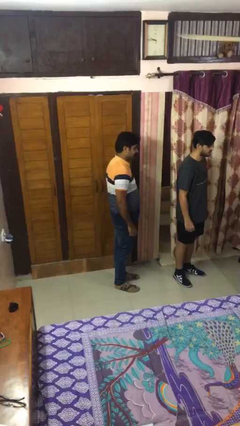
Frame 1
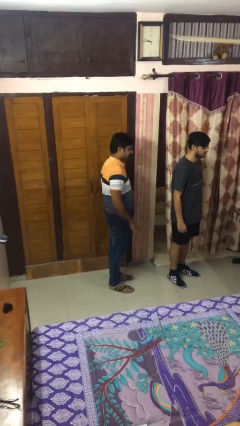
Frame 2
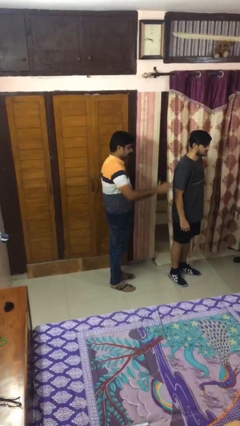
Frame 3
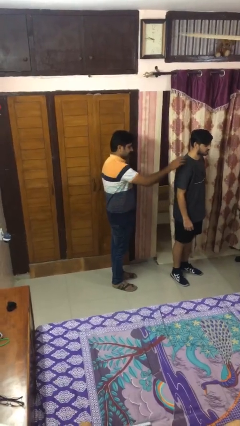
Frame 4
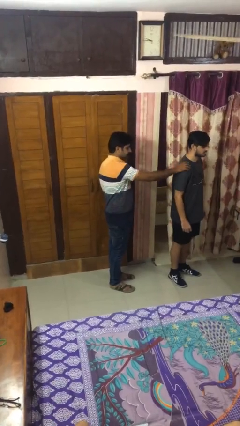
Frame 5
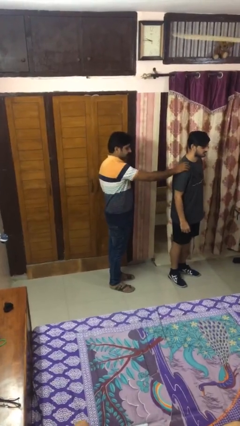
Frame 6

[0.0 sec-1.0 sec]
person grabs person by shoulder

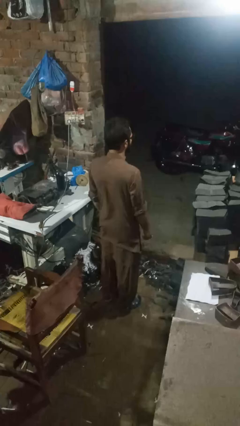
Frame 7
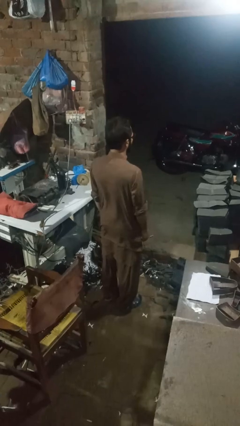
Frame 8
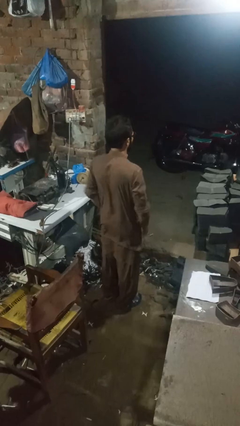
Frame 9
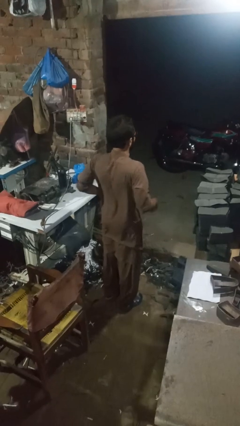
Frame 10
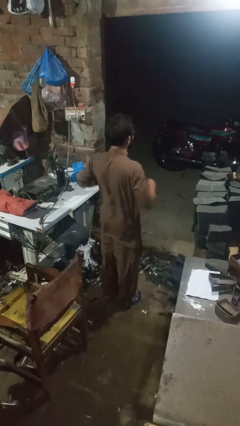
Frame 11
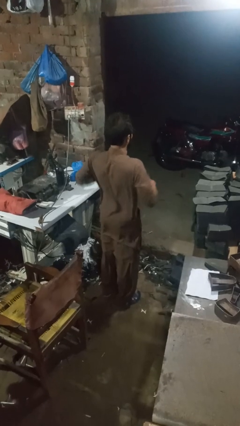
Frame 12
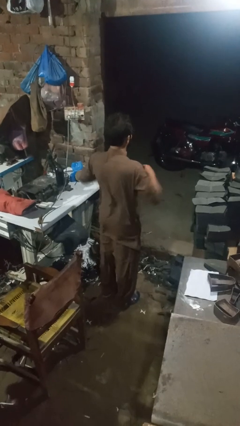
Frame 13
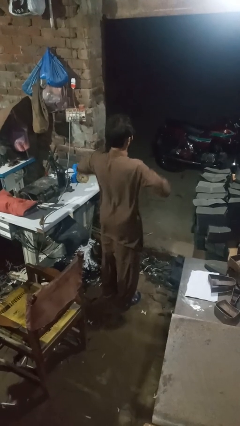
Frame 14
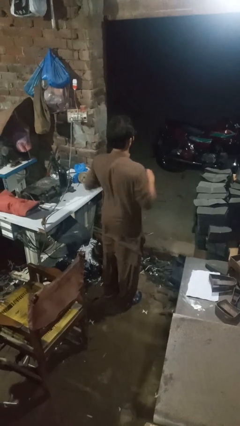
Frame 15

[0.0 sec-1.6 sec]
person dances in place

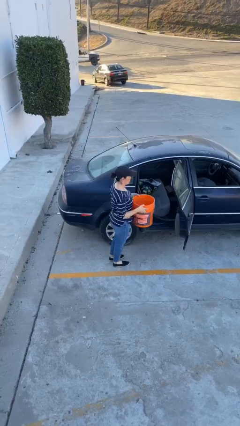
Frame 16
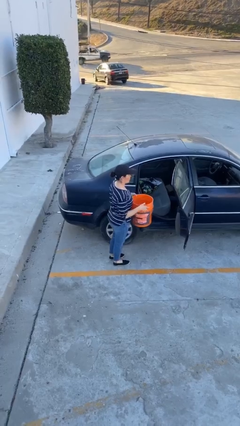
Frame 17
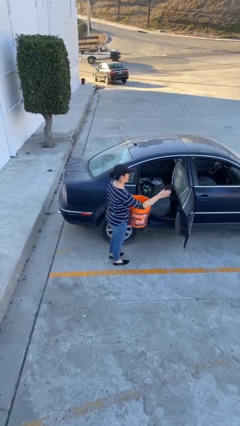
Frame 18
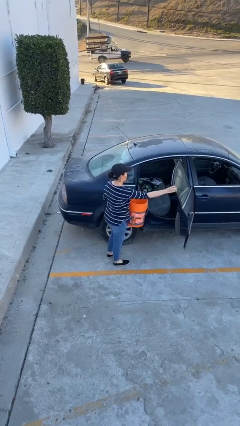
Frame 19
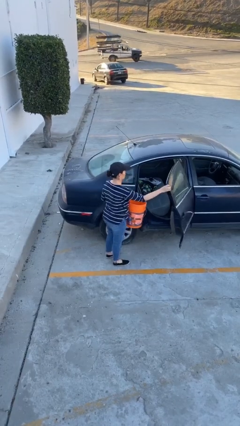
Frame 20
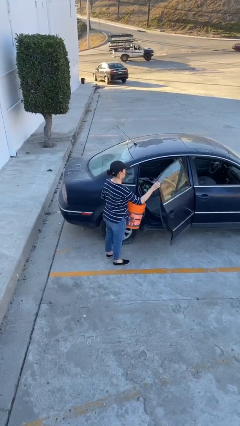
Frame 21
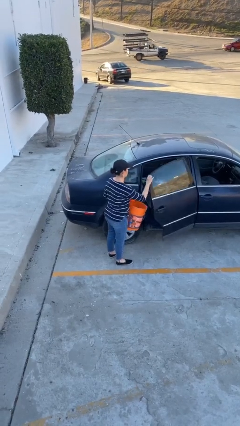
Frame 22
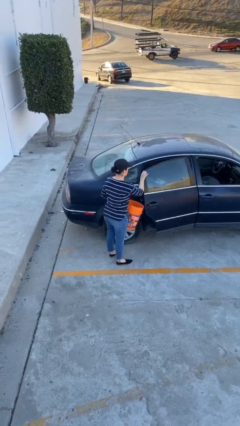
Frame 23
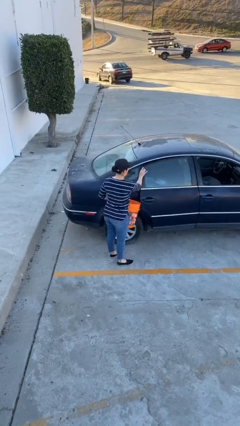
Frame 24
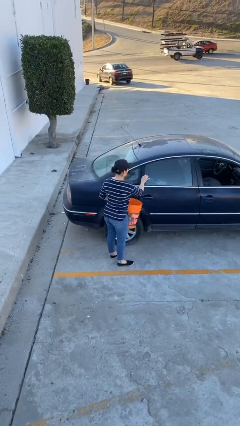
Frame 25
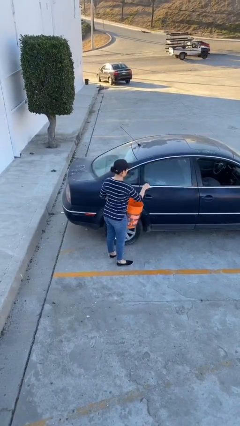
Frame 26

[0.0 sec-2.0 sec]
person closes car door

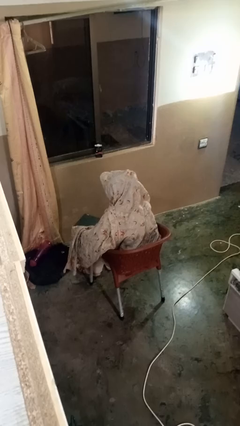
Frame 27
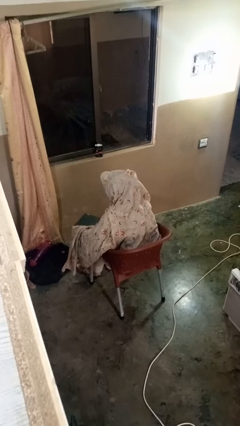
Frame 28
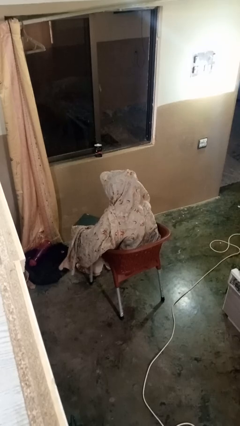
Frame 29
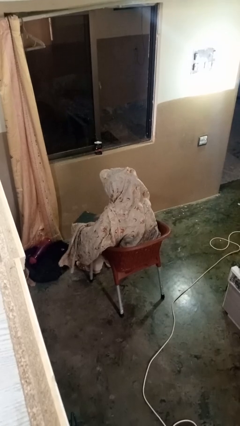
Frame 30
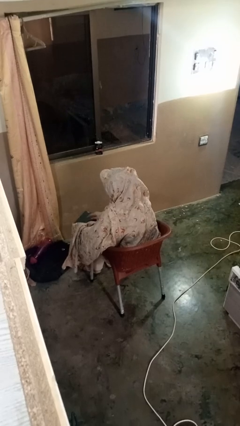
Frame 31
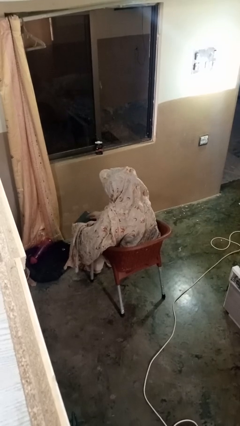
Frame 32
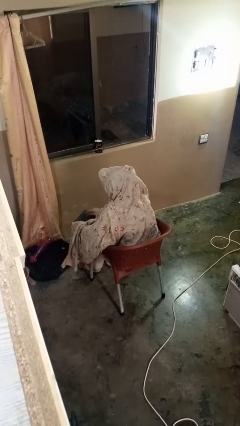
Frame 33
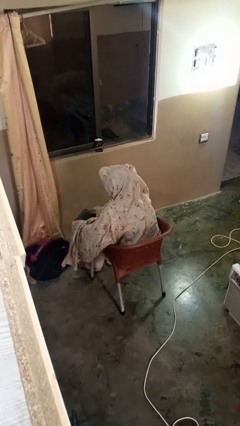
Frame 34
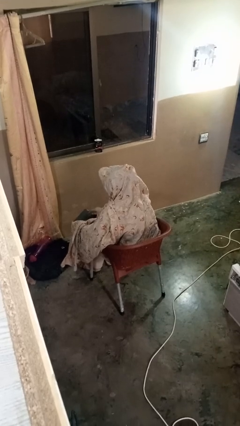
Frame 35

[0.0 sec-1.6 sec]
person interacts with tablet

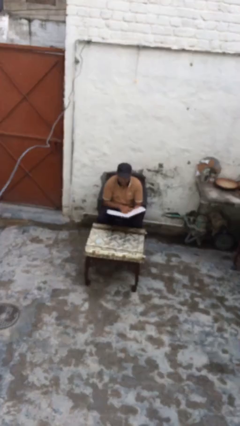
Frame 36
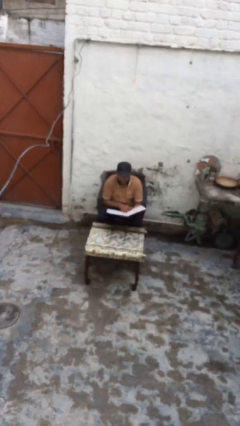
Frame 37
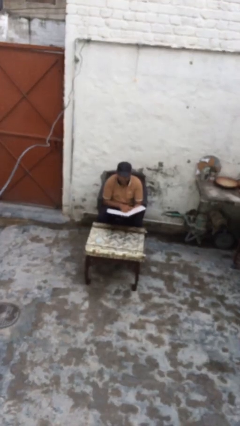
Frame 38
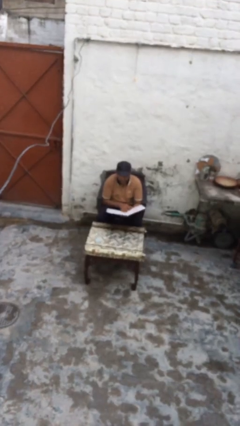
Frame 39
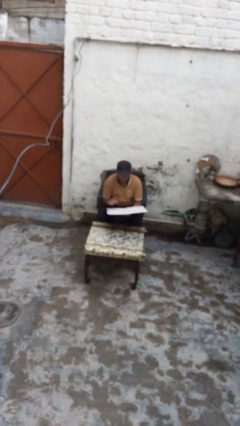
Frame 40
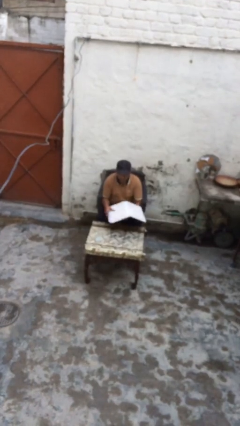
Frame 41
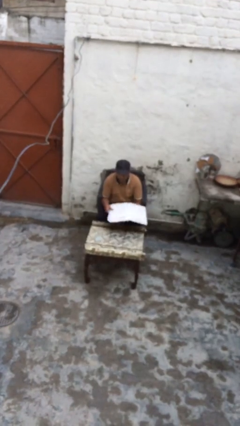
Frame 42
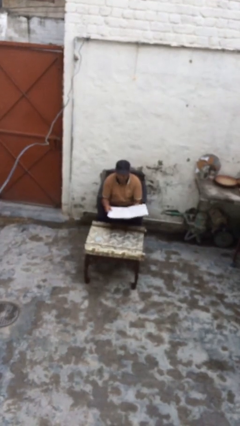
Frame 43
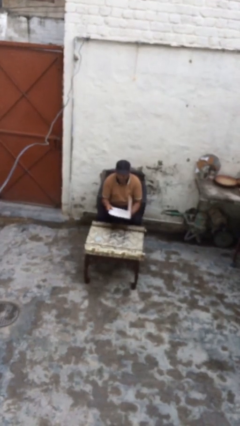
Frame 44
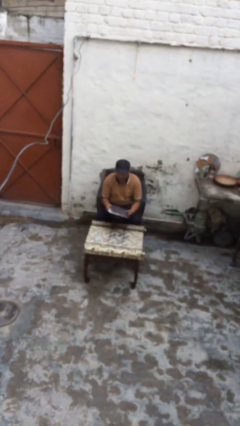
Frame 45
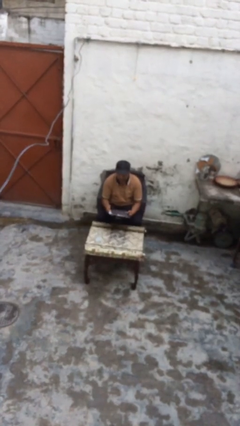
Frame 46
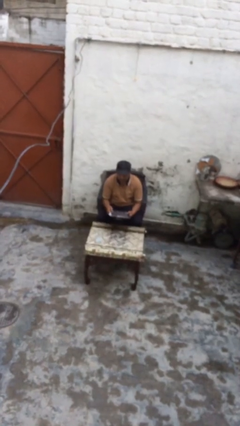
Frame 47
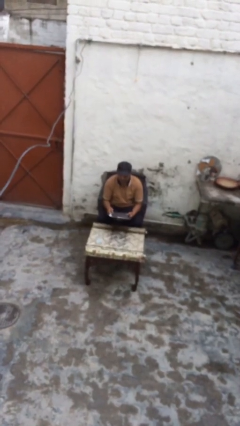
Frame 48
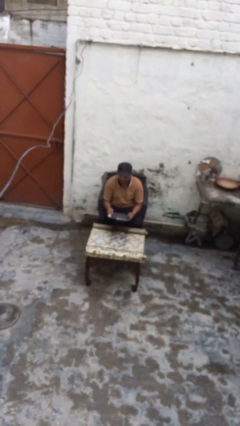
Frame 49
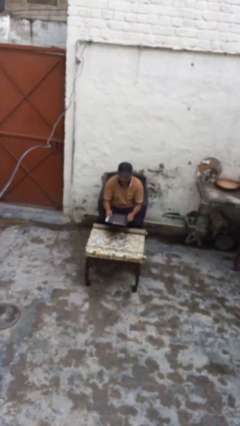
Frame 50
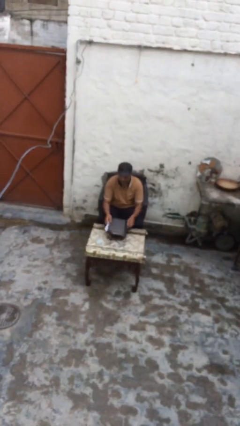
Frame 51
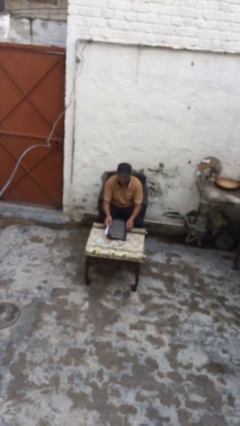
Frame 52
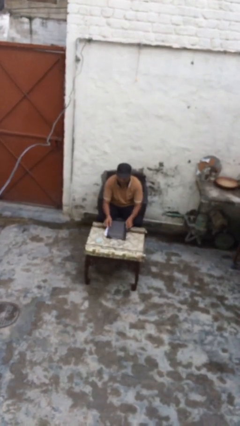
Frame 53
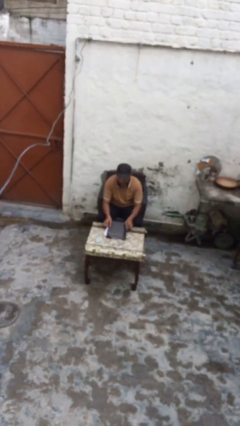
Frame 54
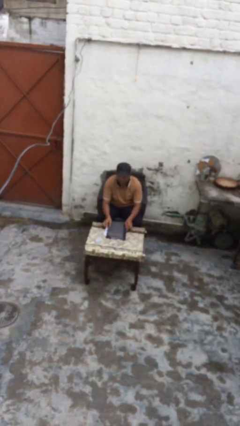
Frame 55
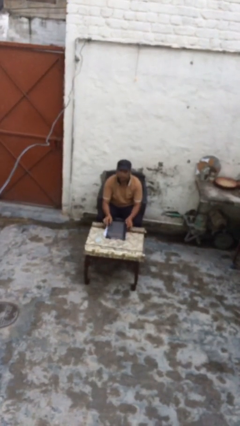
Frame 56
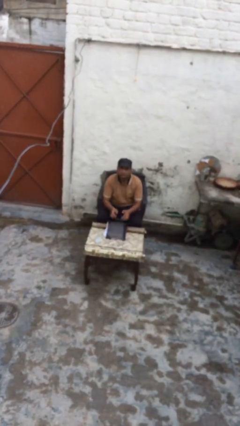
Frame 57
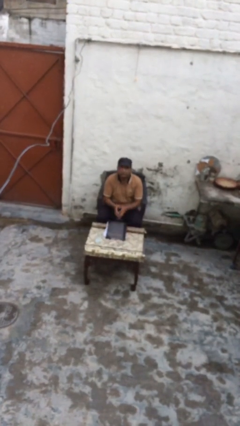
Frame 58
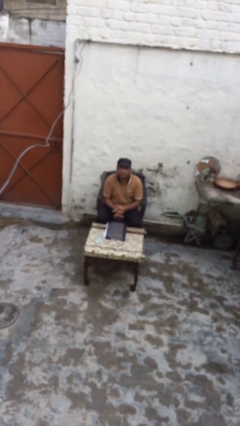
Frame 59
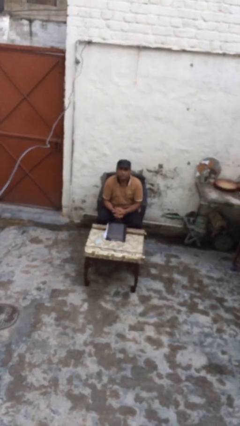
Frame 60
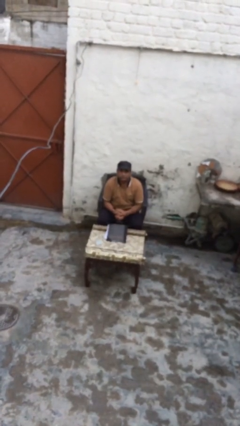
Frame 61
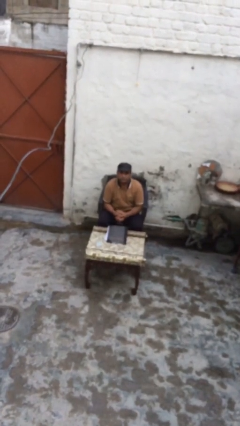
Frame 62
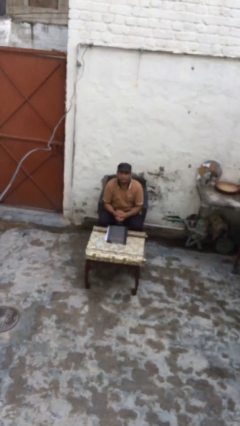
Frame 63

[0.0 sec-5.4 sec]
person puts down object on table

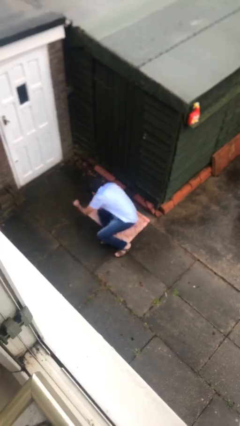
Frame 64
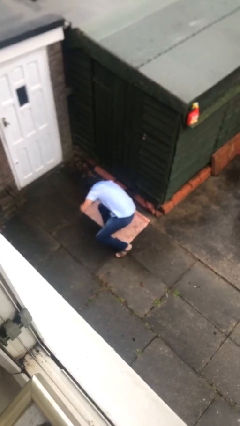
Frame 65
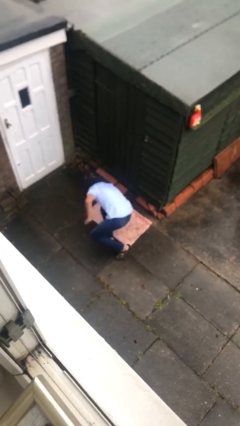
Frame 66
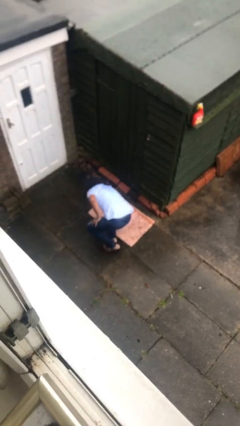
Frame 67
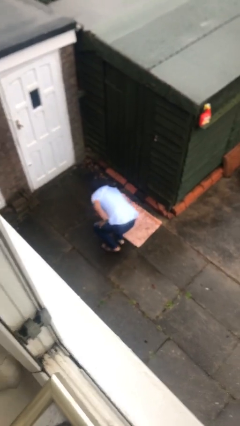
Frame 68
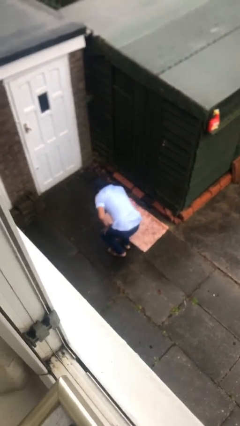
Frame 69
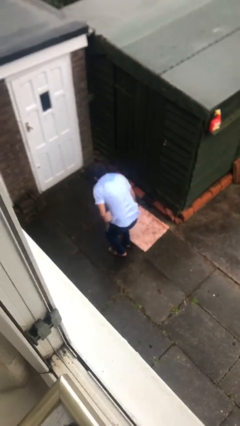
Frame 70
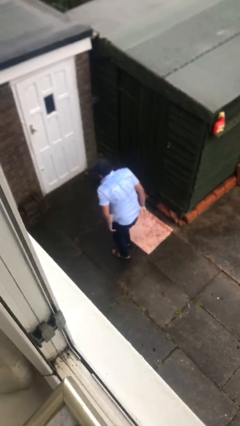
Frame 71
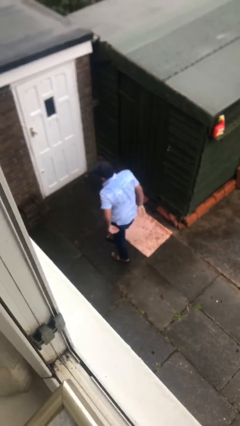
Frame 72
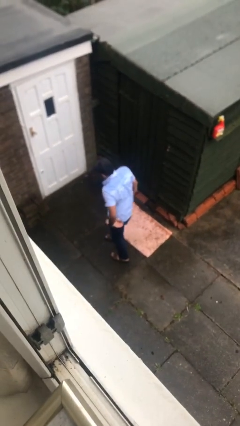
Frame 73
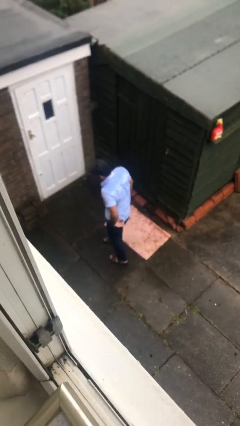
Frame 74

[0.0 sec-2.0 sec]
person stands up

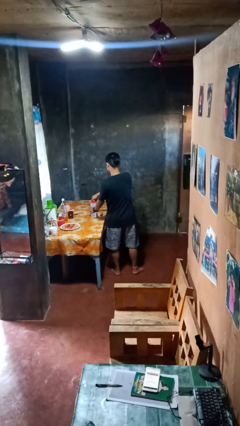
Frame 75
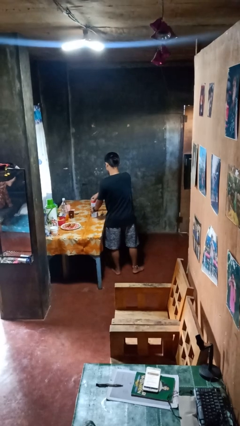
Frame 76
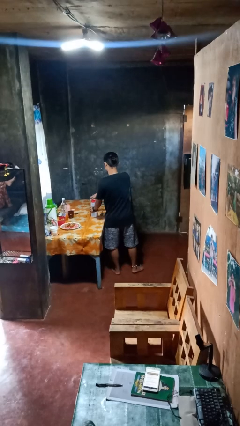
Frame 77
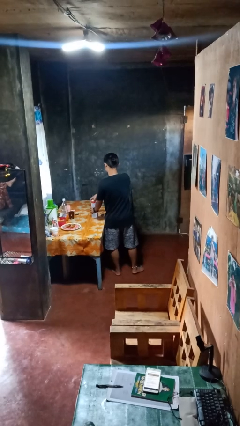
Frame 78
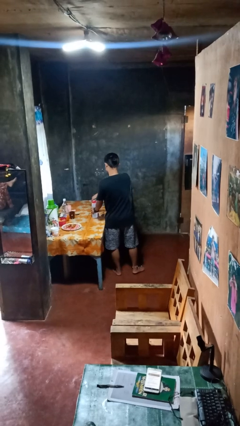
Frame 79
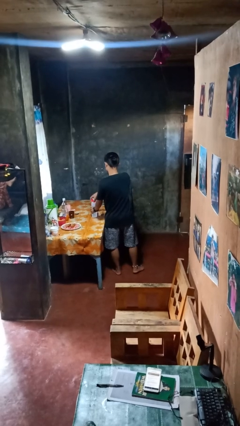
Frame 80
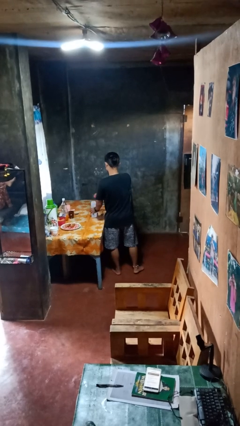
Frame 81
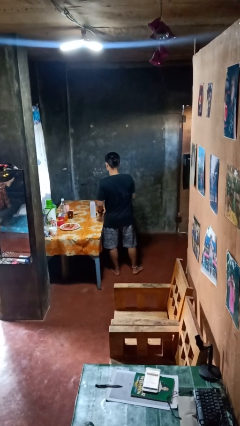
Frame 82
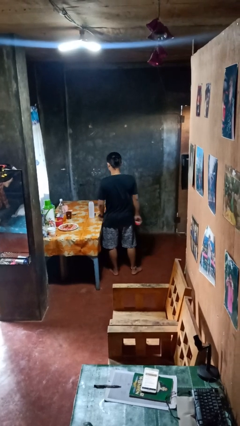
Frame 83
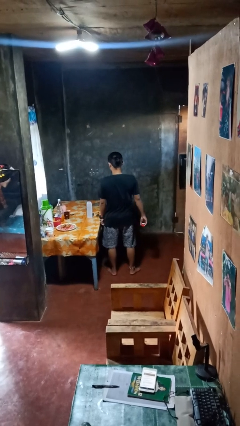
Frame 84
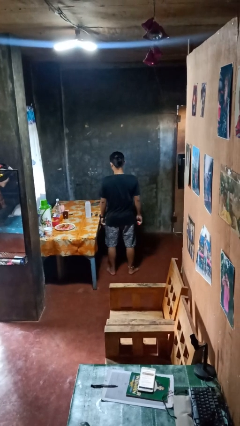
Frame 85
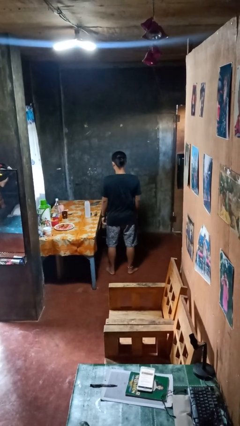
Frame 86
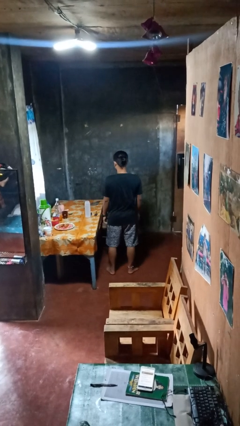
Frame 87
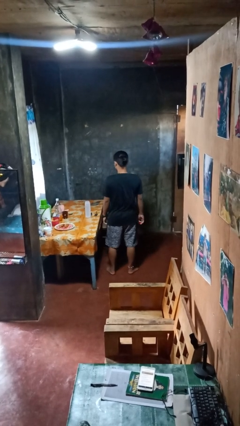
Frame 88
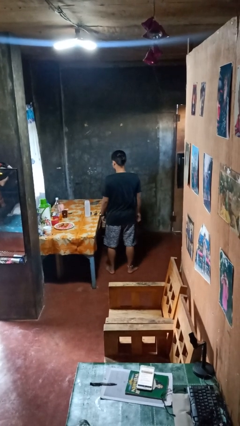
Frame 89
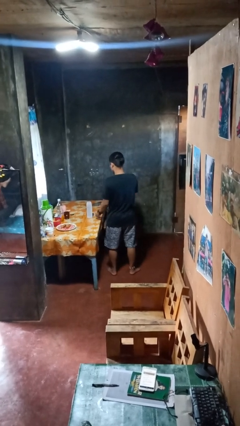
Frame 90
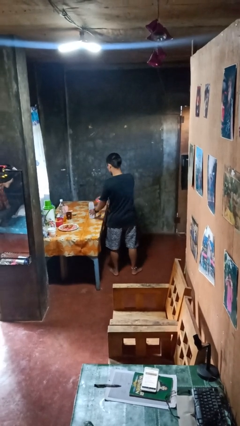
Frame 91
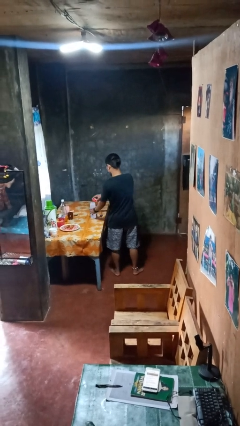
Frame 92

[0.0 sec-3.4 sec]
person opens jar
